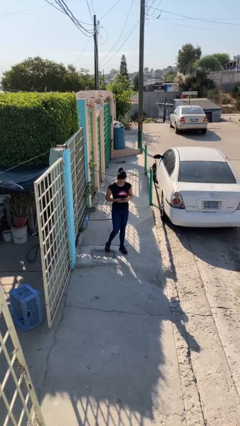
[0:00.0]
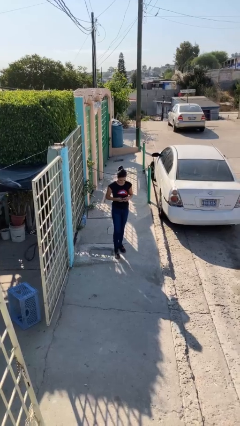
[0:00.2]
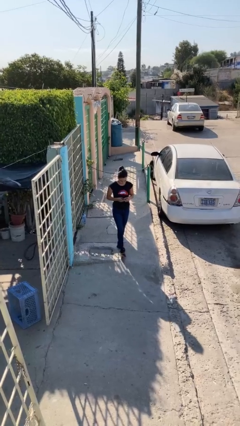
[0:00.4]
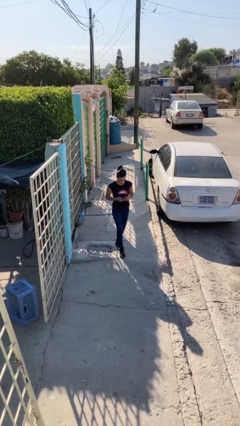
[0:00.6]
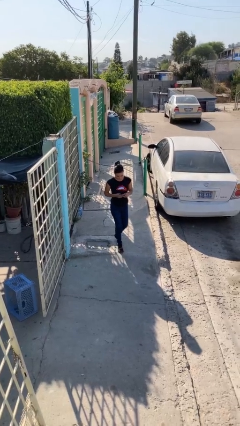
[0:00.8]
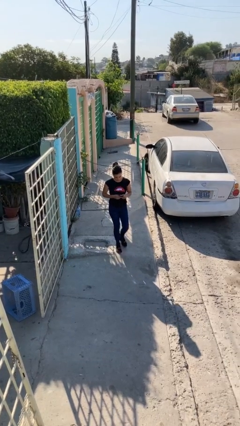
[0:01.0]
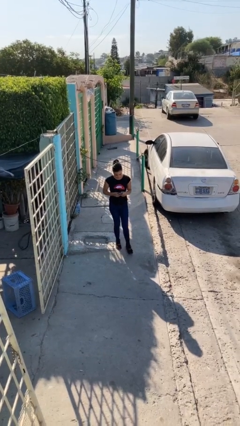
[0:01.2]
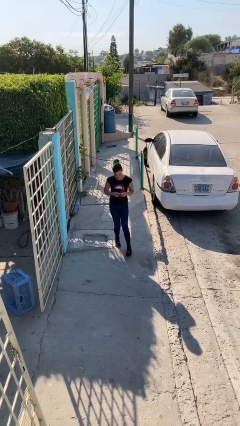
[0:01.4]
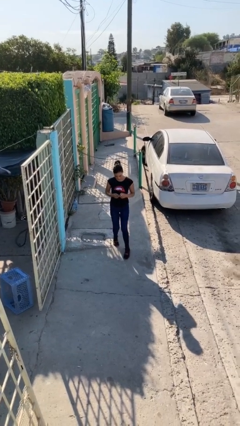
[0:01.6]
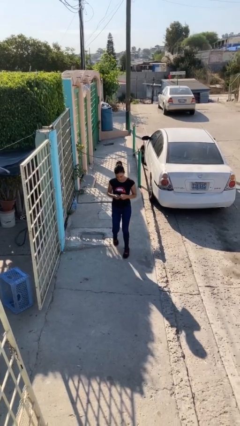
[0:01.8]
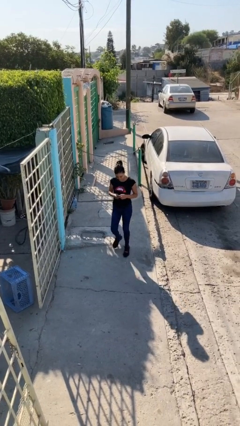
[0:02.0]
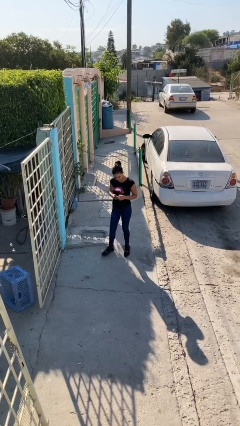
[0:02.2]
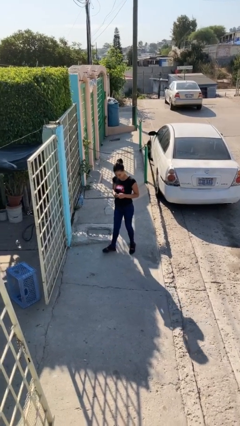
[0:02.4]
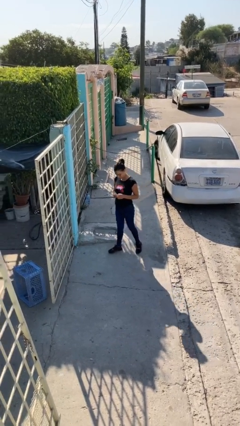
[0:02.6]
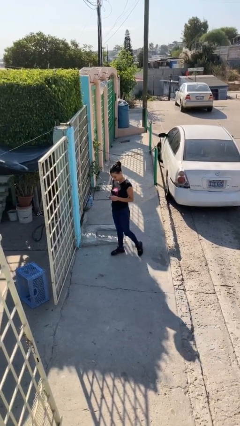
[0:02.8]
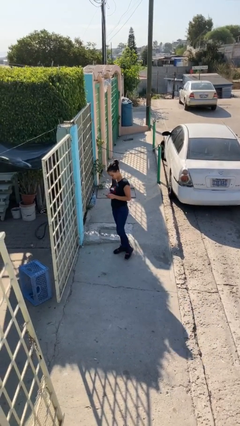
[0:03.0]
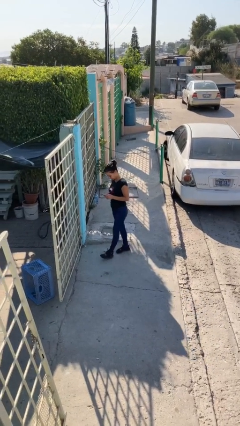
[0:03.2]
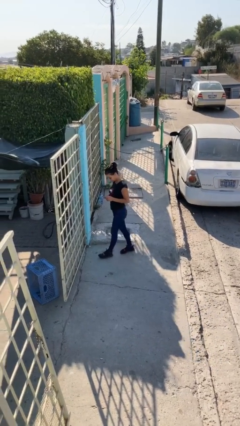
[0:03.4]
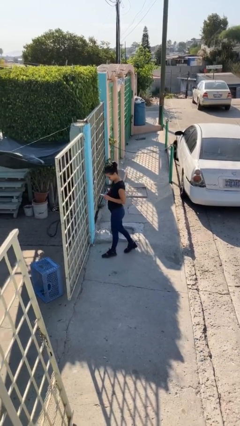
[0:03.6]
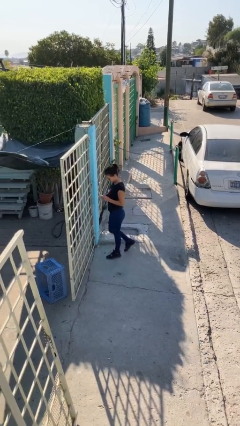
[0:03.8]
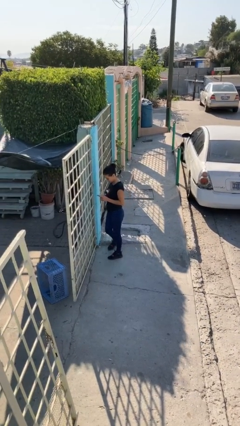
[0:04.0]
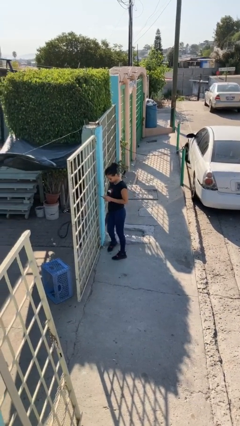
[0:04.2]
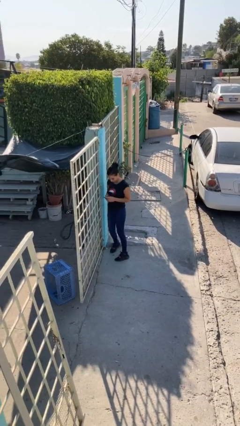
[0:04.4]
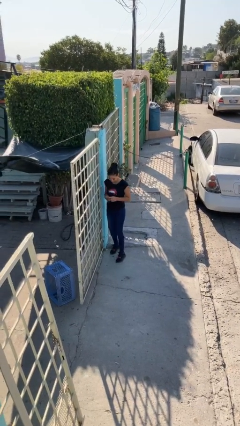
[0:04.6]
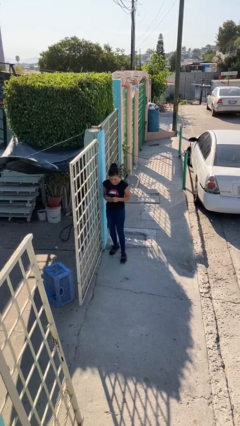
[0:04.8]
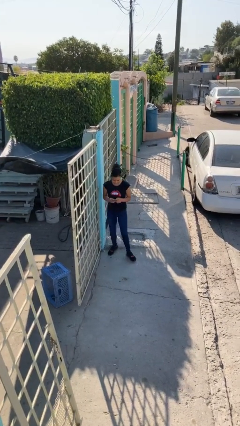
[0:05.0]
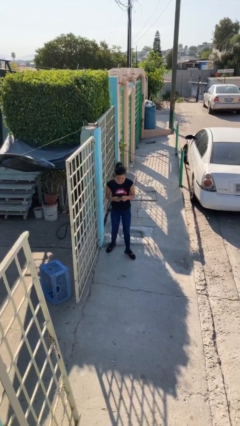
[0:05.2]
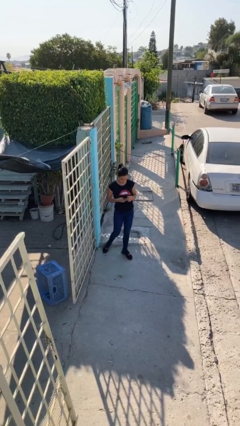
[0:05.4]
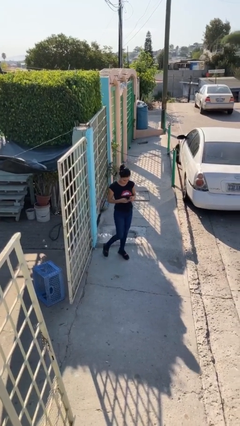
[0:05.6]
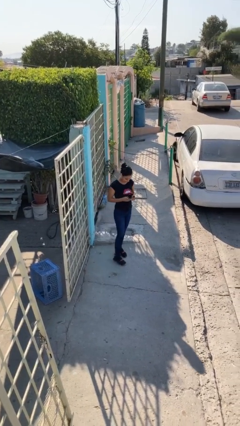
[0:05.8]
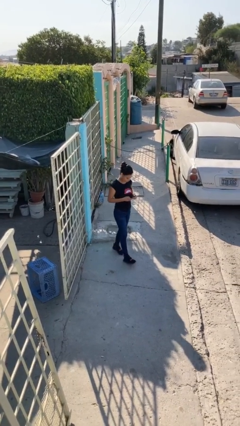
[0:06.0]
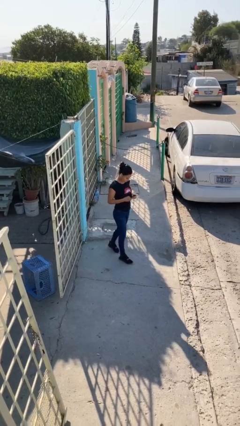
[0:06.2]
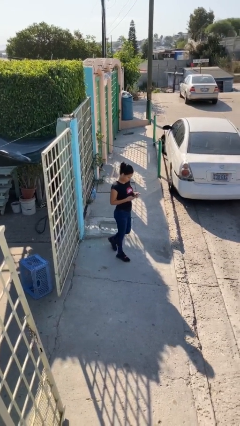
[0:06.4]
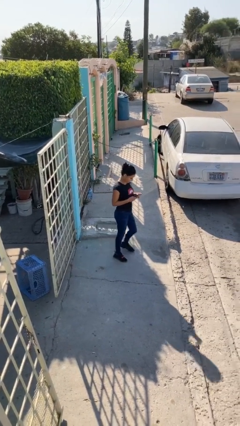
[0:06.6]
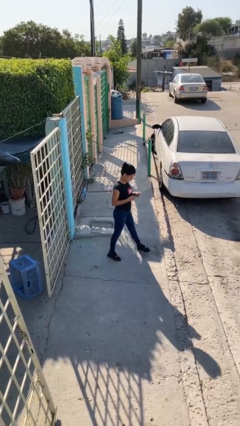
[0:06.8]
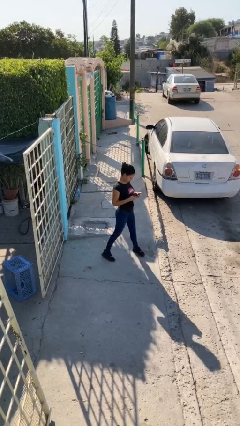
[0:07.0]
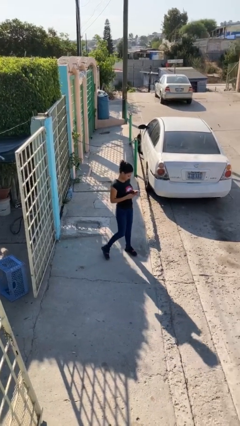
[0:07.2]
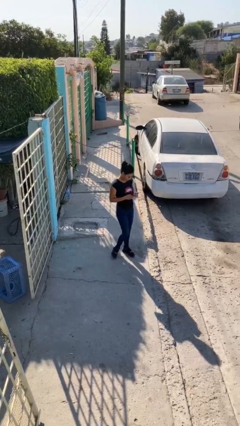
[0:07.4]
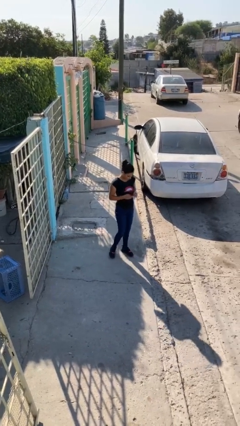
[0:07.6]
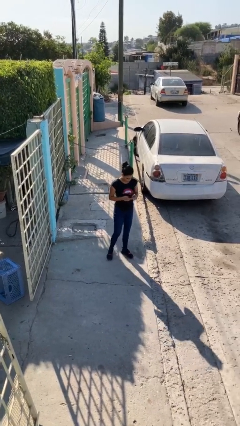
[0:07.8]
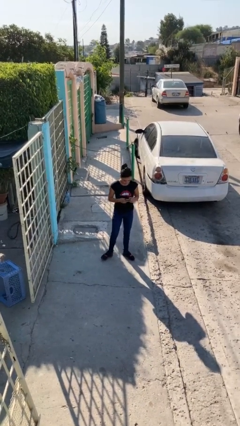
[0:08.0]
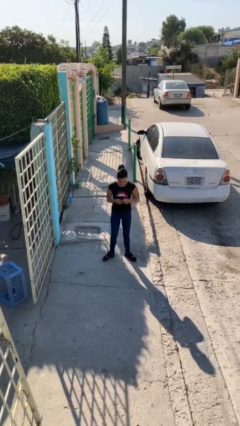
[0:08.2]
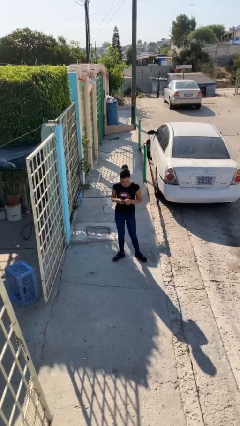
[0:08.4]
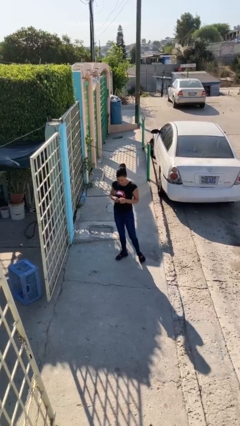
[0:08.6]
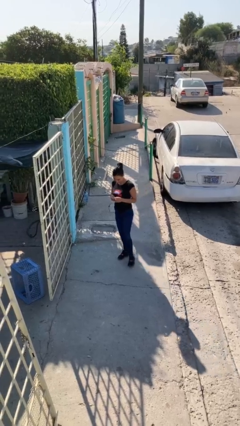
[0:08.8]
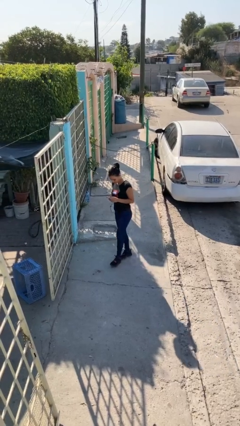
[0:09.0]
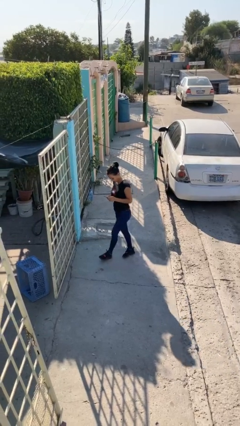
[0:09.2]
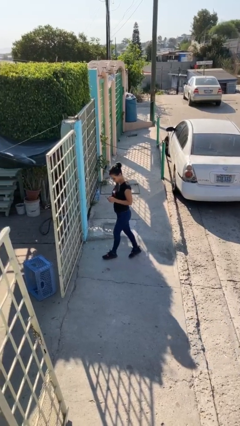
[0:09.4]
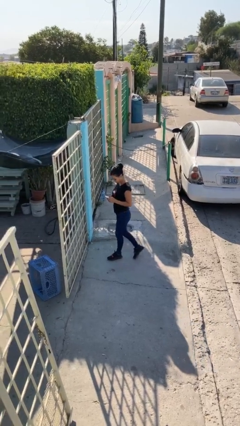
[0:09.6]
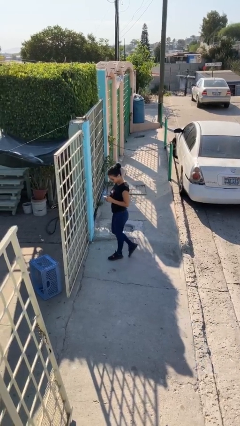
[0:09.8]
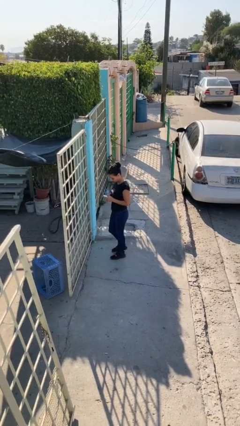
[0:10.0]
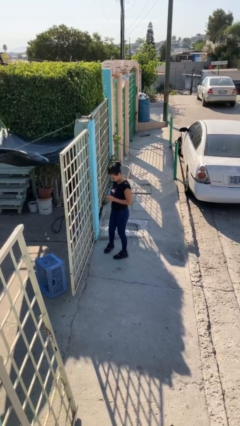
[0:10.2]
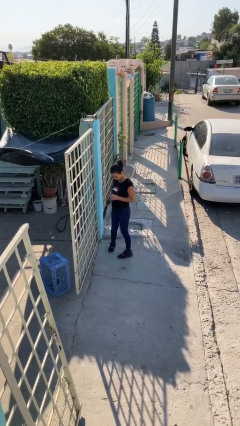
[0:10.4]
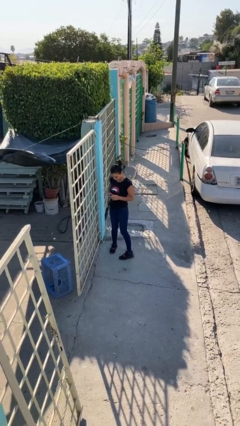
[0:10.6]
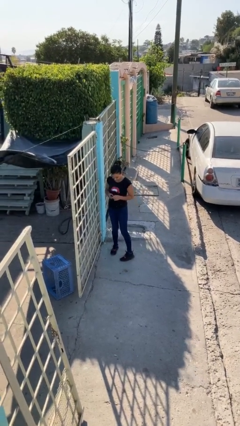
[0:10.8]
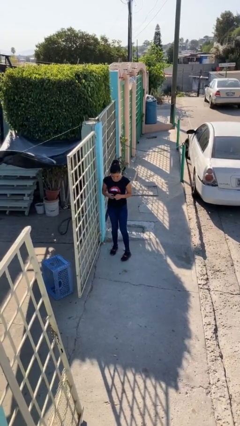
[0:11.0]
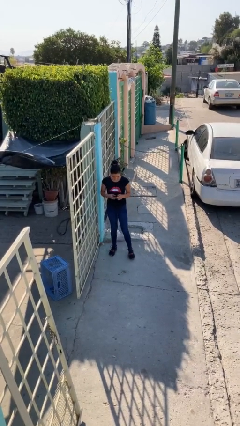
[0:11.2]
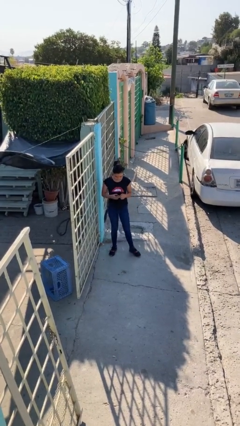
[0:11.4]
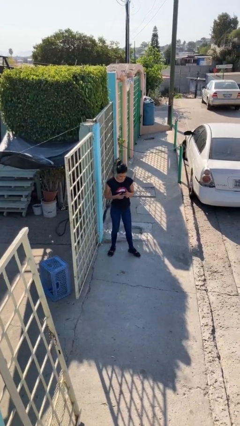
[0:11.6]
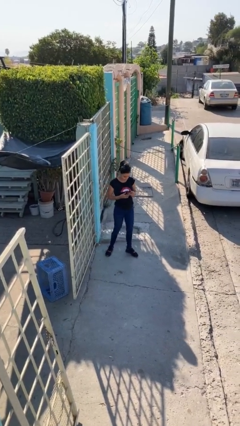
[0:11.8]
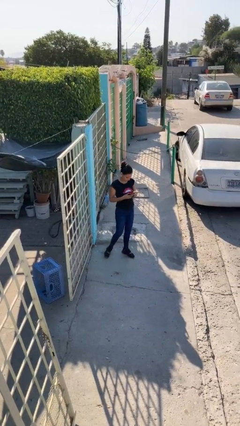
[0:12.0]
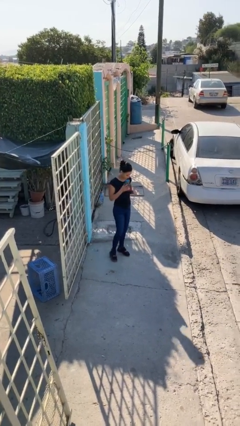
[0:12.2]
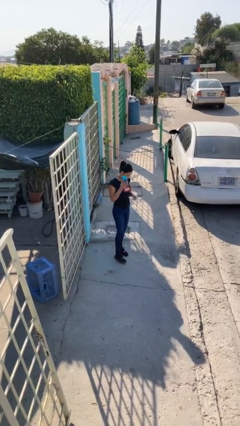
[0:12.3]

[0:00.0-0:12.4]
person texts on phone

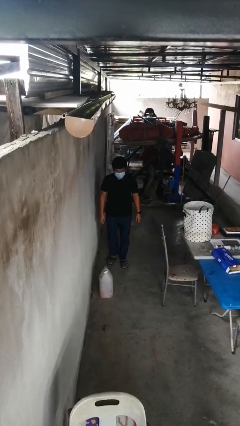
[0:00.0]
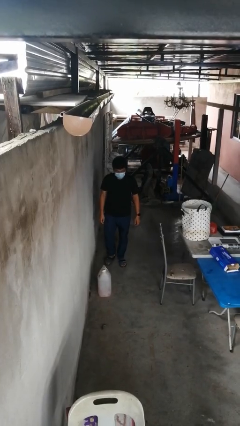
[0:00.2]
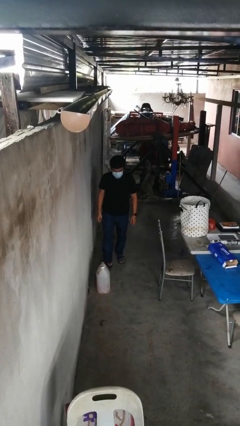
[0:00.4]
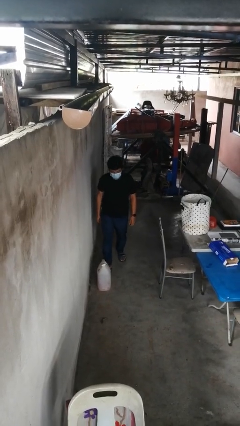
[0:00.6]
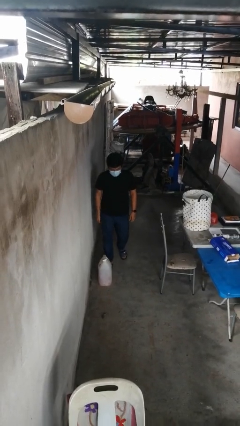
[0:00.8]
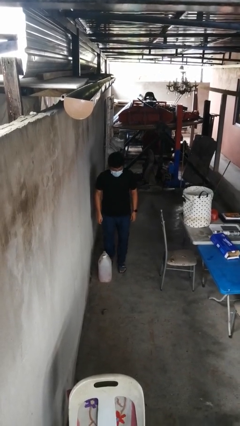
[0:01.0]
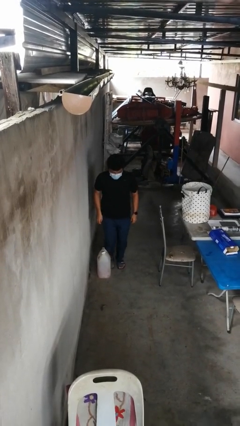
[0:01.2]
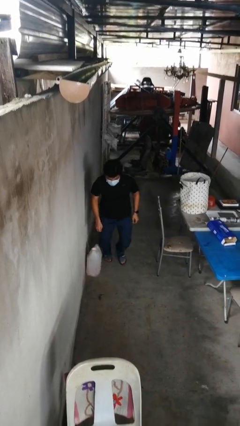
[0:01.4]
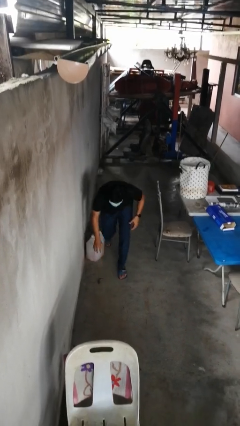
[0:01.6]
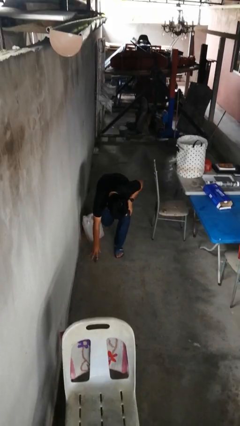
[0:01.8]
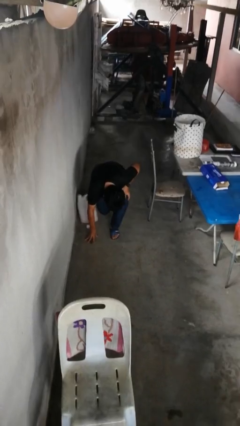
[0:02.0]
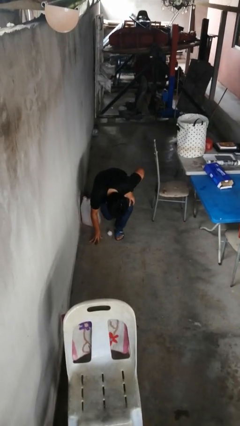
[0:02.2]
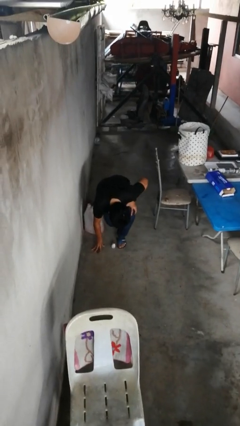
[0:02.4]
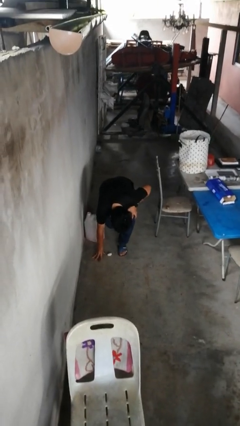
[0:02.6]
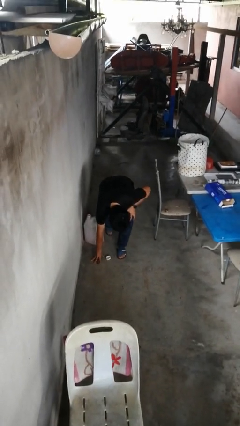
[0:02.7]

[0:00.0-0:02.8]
person trips on object on floor

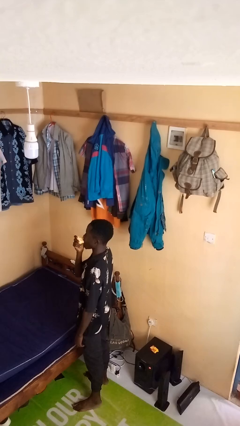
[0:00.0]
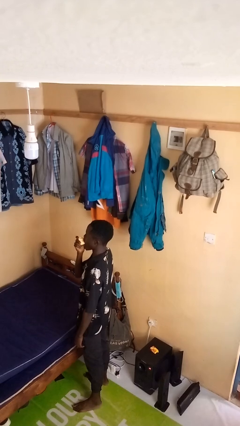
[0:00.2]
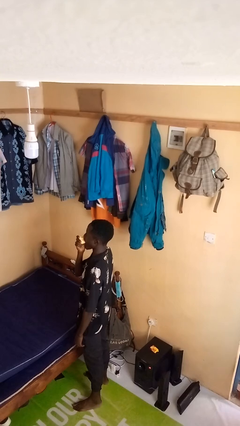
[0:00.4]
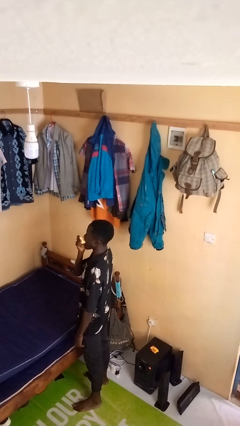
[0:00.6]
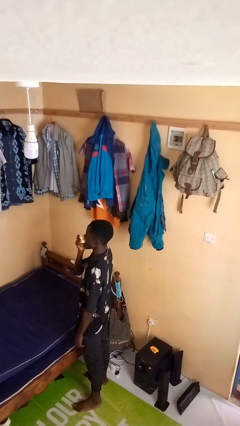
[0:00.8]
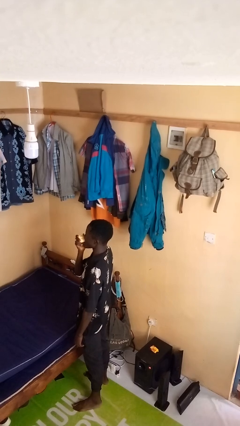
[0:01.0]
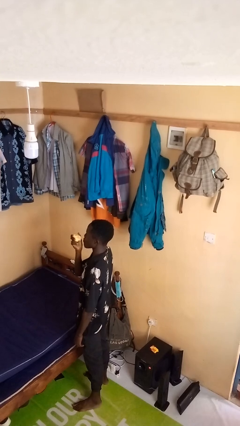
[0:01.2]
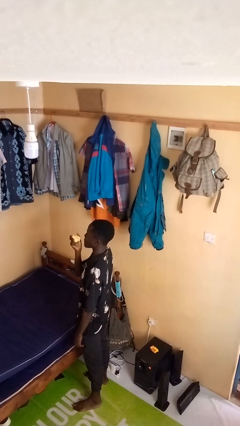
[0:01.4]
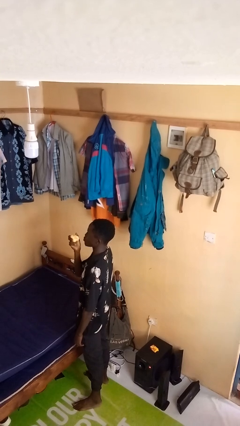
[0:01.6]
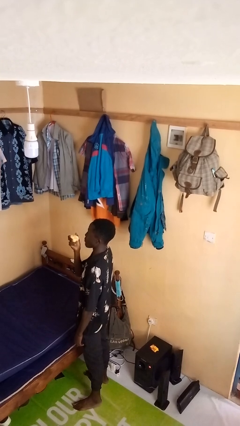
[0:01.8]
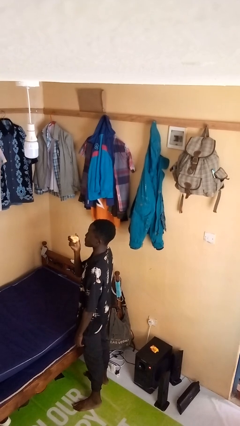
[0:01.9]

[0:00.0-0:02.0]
person eats apple

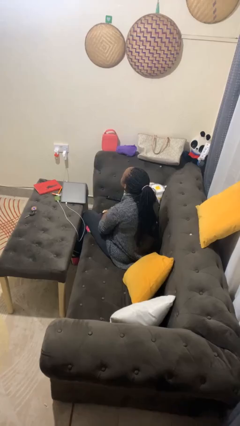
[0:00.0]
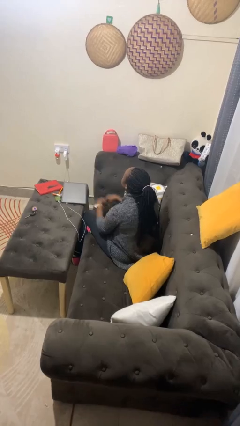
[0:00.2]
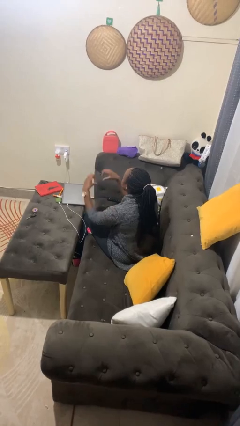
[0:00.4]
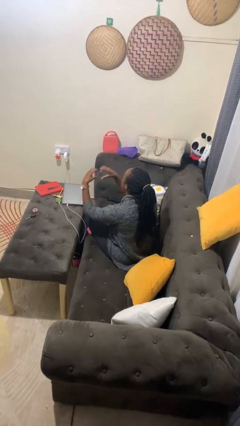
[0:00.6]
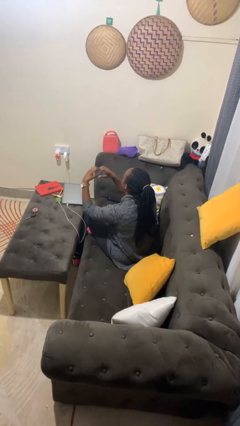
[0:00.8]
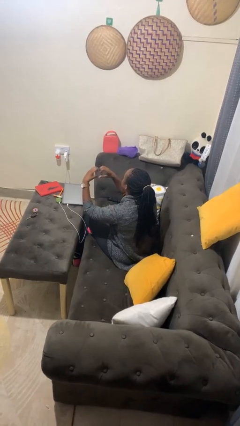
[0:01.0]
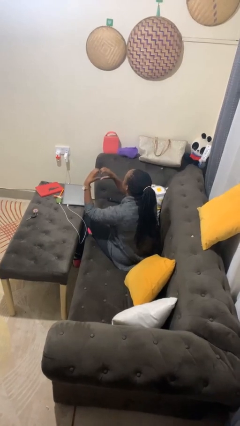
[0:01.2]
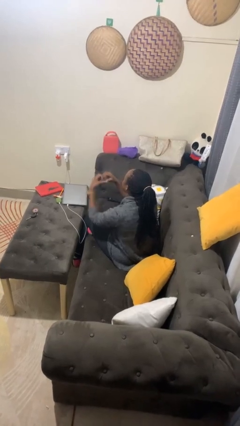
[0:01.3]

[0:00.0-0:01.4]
person gestures heart
